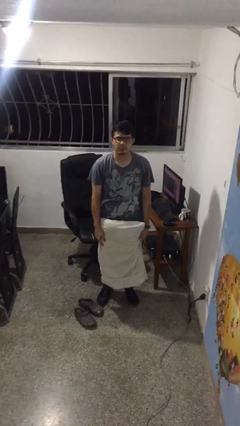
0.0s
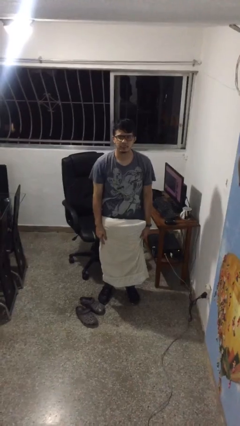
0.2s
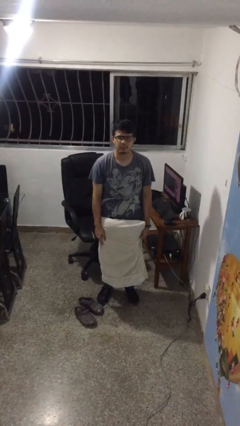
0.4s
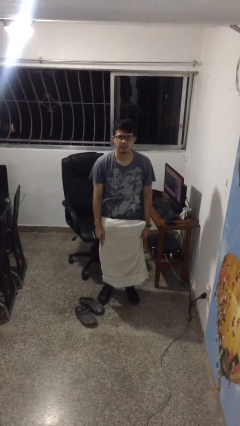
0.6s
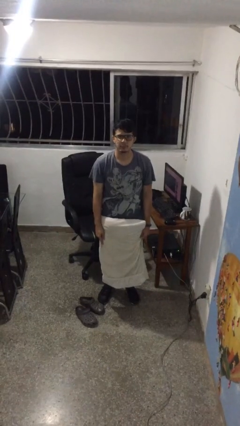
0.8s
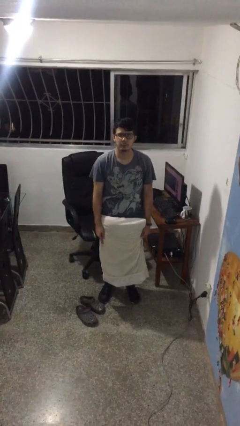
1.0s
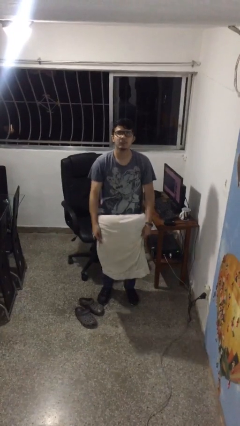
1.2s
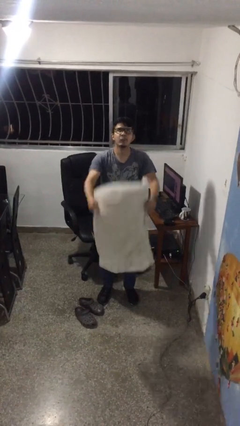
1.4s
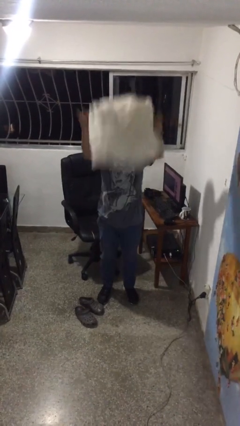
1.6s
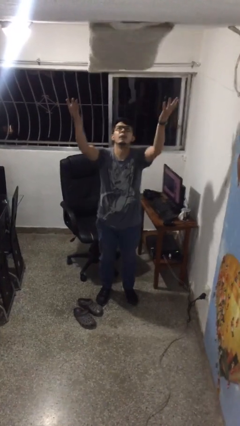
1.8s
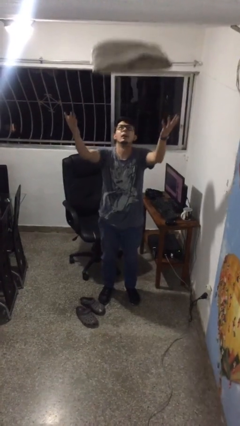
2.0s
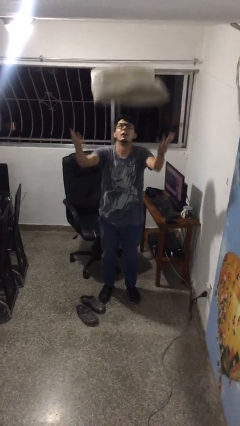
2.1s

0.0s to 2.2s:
person drops object

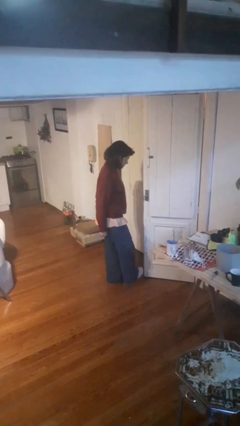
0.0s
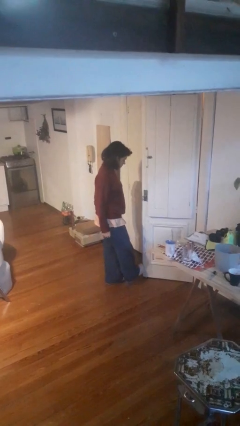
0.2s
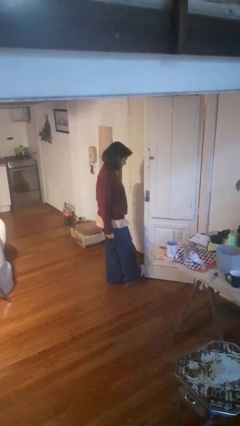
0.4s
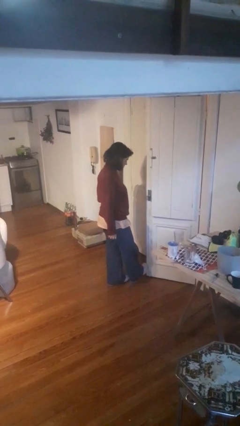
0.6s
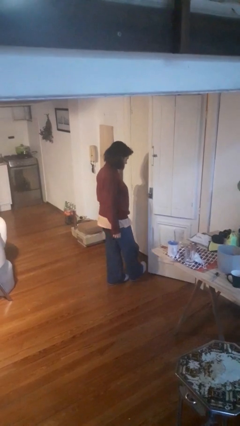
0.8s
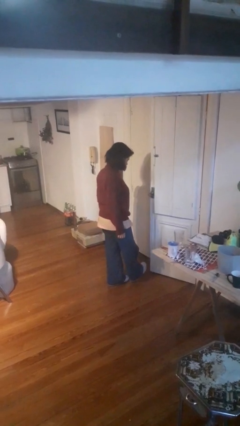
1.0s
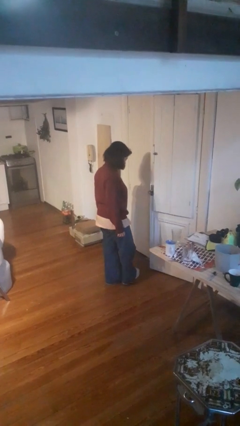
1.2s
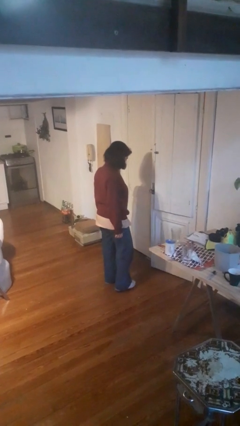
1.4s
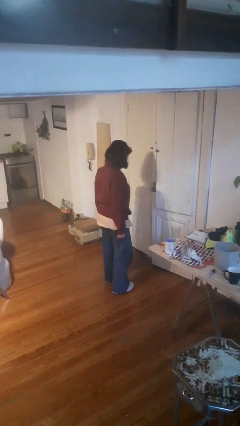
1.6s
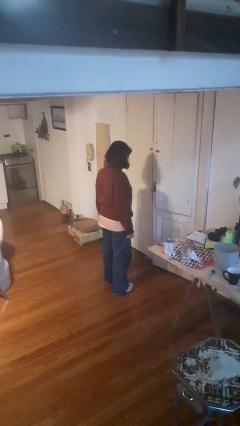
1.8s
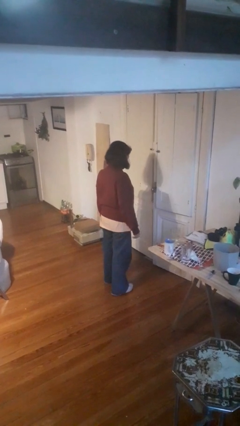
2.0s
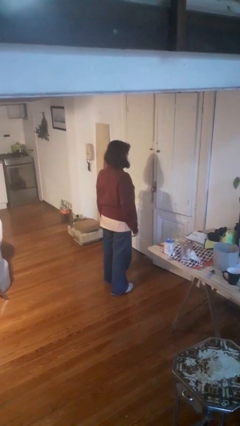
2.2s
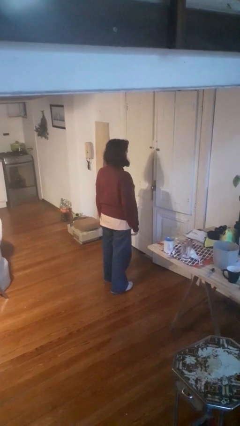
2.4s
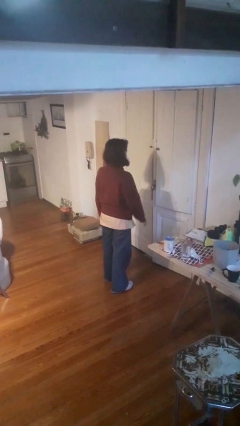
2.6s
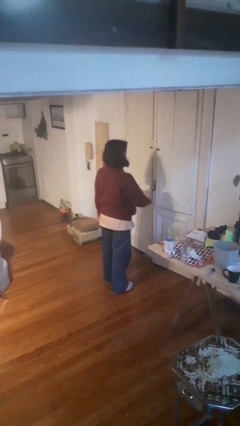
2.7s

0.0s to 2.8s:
person closes door with foot

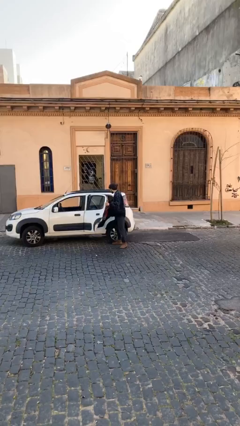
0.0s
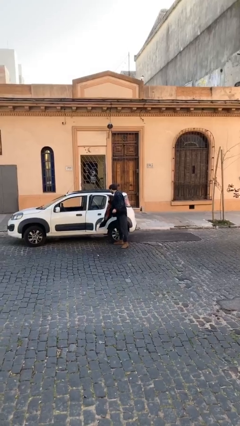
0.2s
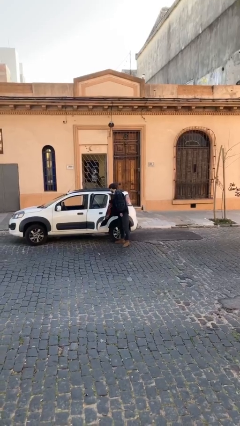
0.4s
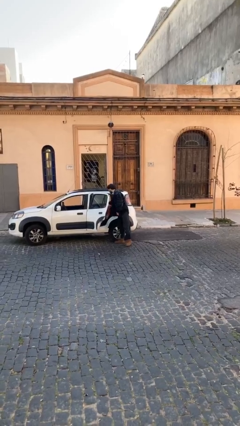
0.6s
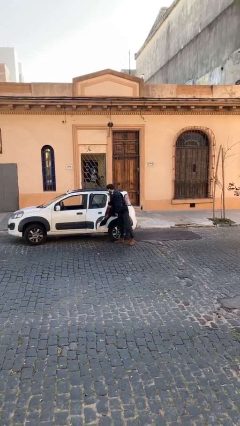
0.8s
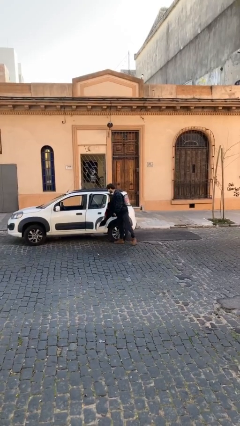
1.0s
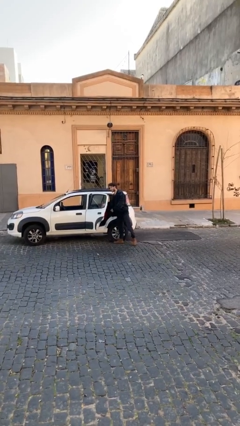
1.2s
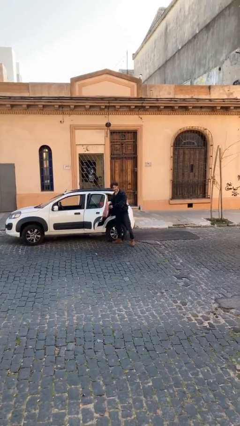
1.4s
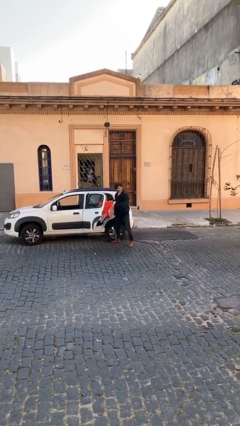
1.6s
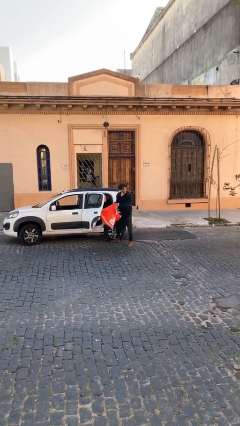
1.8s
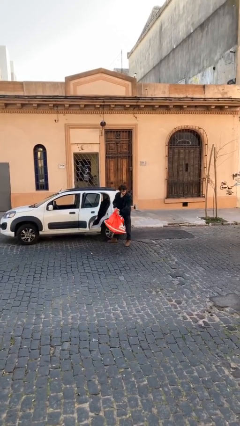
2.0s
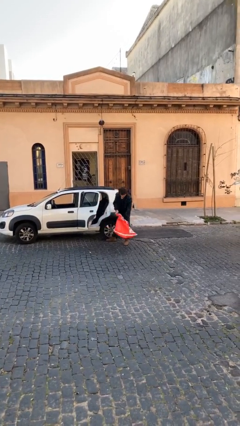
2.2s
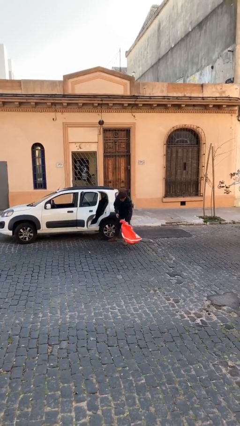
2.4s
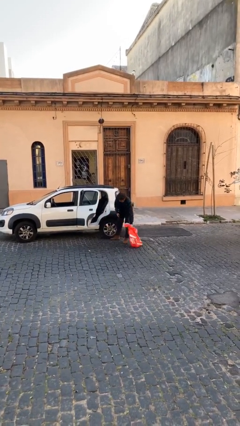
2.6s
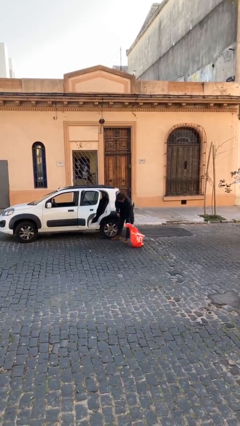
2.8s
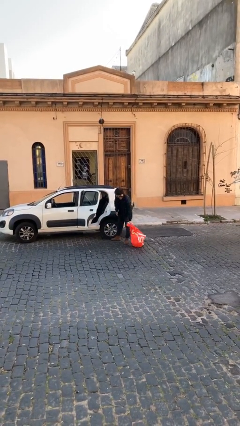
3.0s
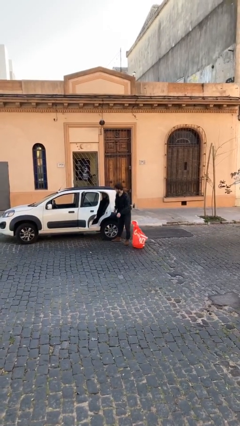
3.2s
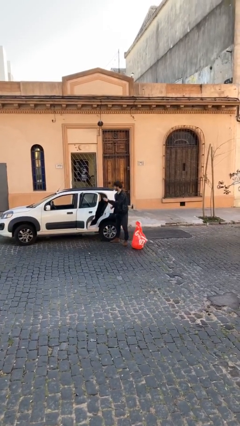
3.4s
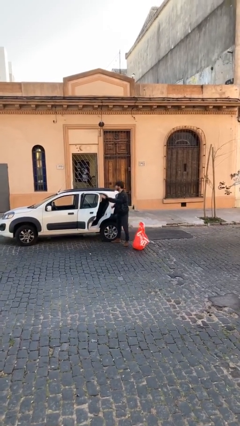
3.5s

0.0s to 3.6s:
person unloads car

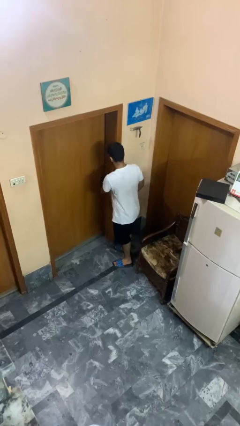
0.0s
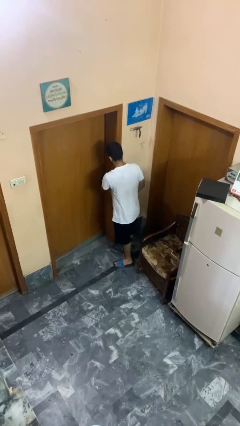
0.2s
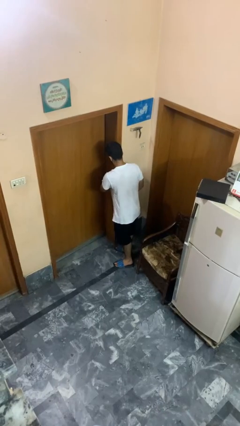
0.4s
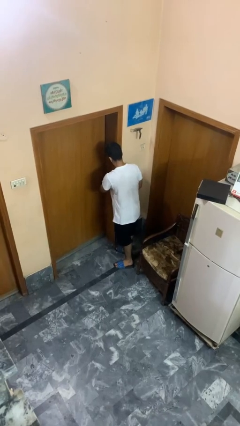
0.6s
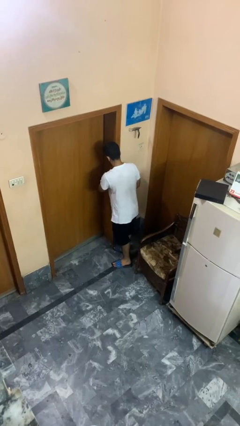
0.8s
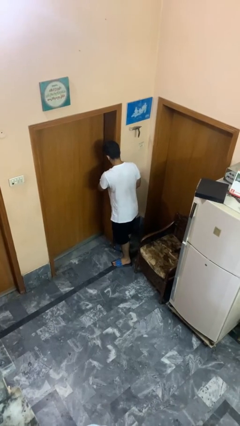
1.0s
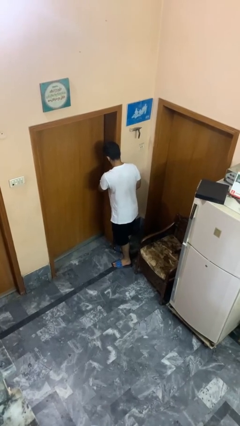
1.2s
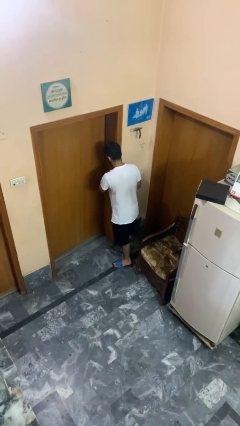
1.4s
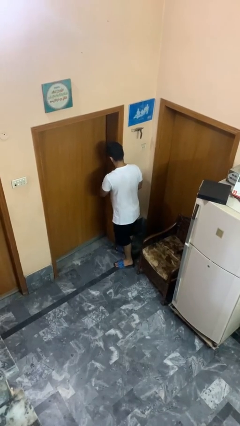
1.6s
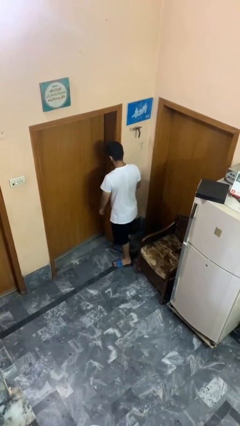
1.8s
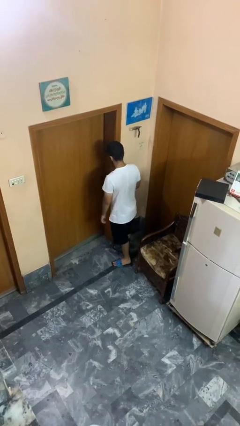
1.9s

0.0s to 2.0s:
person locks door with keys

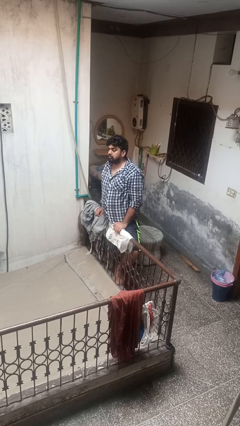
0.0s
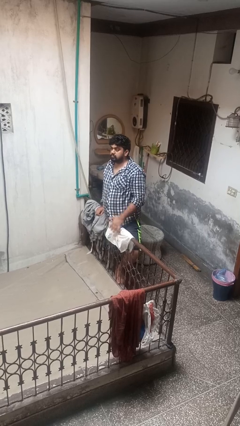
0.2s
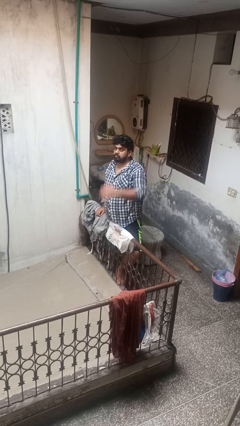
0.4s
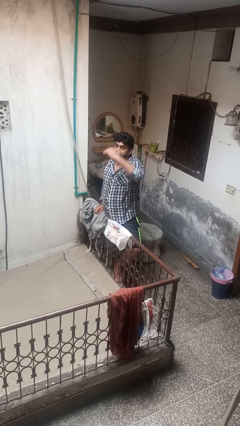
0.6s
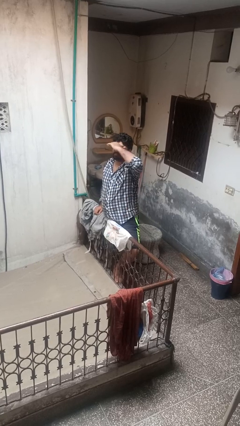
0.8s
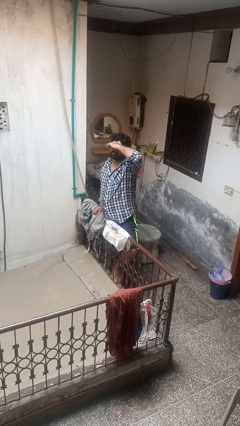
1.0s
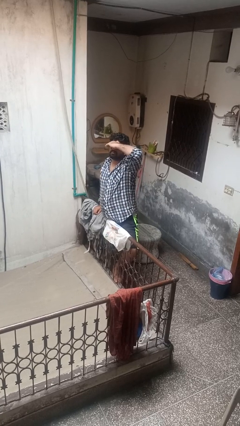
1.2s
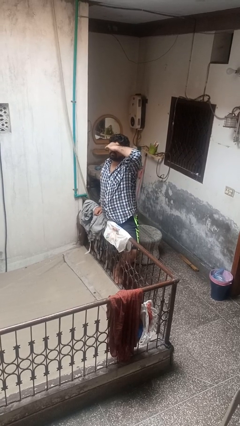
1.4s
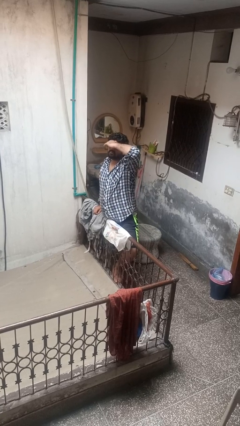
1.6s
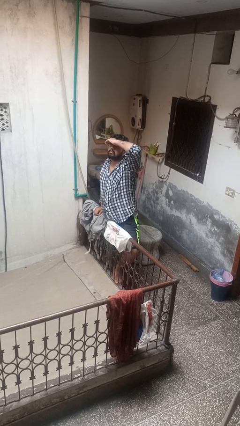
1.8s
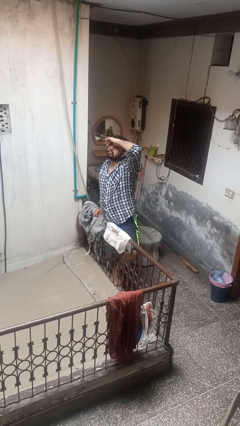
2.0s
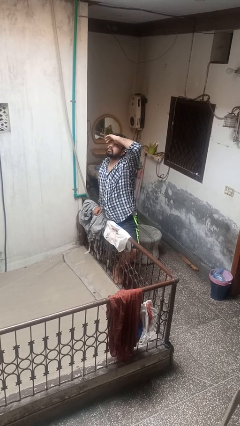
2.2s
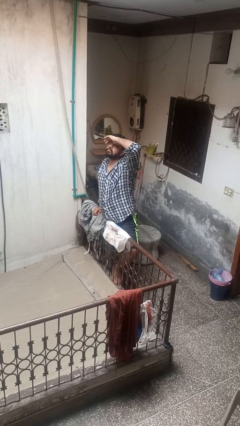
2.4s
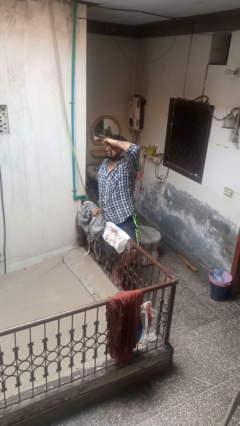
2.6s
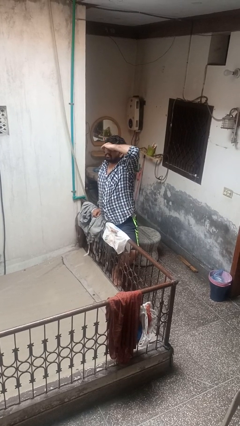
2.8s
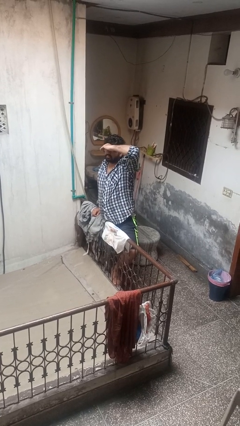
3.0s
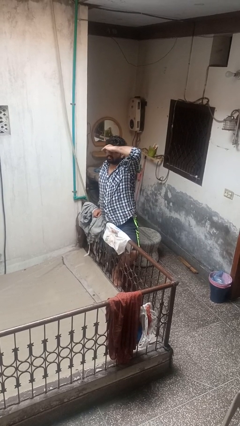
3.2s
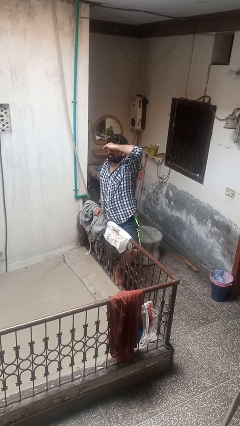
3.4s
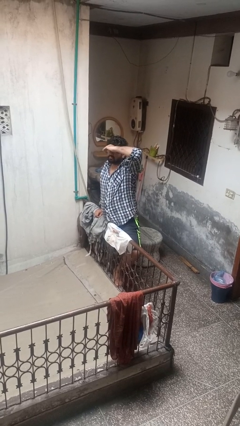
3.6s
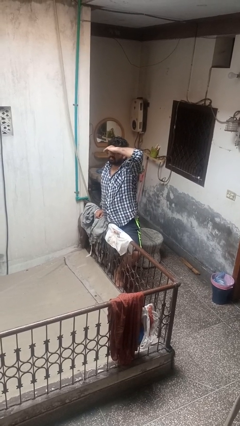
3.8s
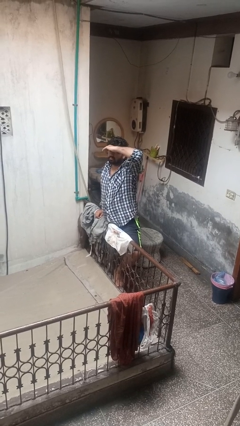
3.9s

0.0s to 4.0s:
person shades eyes

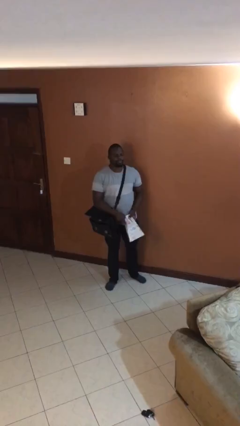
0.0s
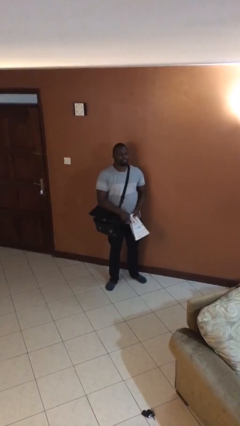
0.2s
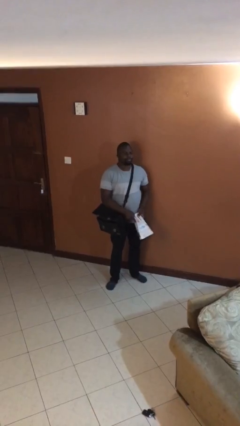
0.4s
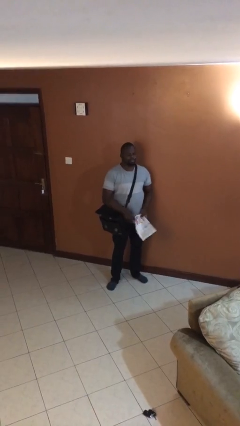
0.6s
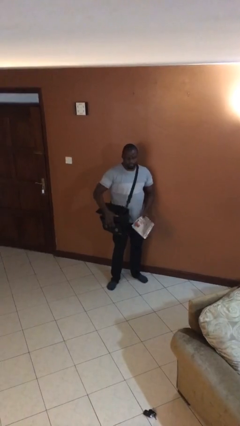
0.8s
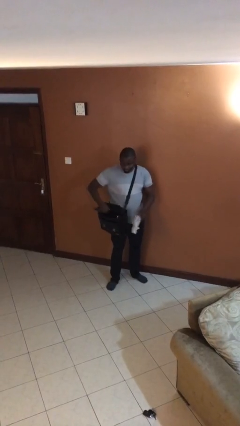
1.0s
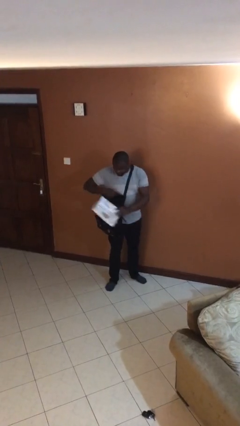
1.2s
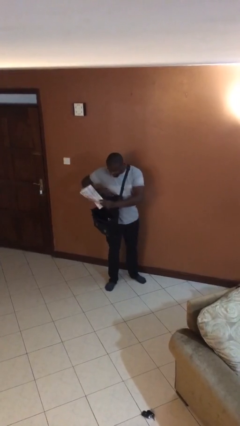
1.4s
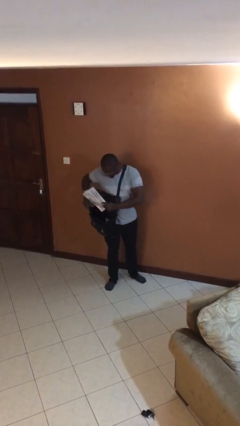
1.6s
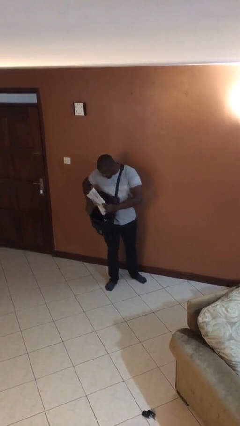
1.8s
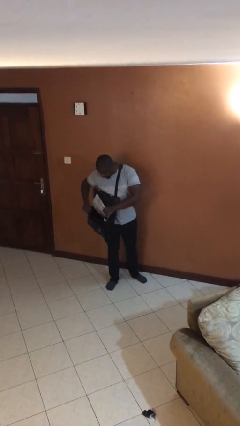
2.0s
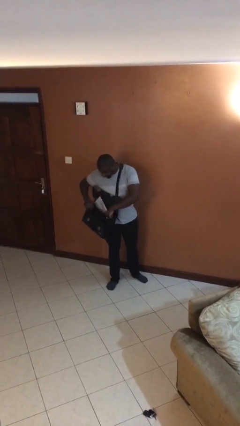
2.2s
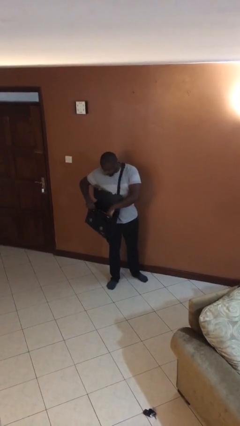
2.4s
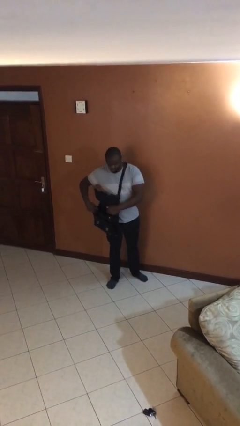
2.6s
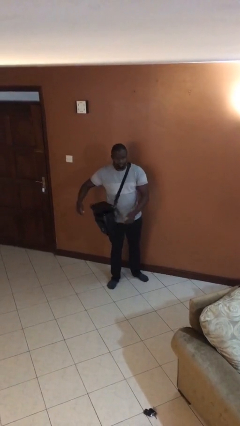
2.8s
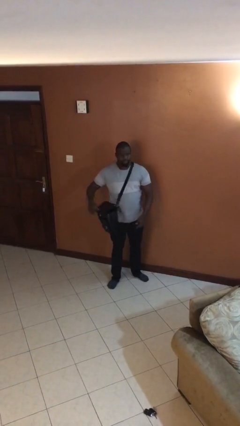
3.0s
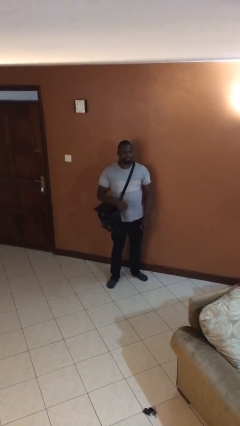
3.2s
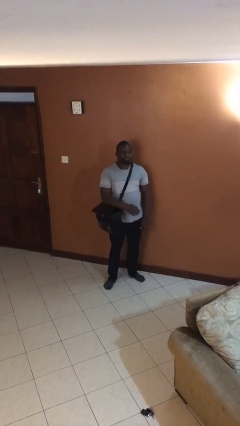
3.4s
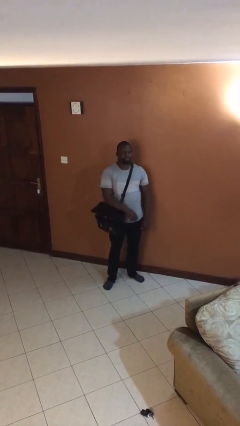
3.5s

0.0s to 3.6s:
person puts object into purse
